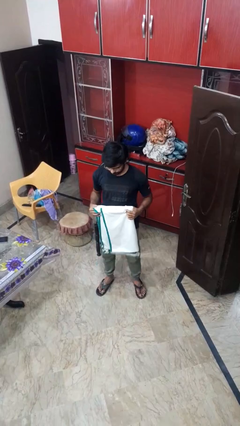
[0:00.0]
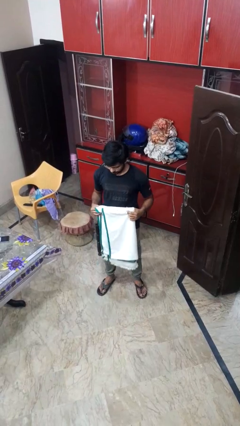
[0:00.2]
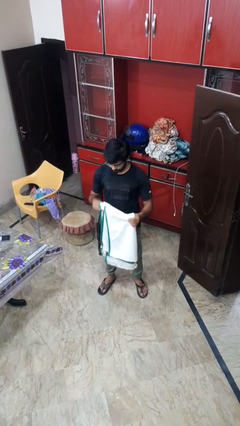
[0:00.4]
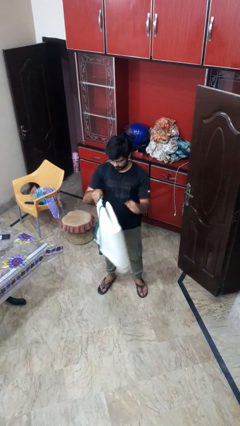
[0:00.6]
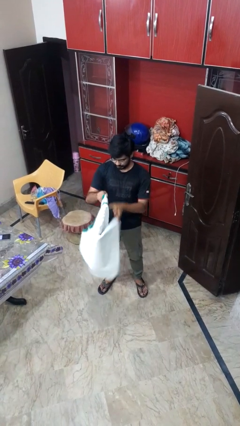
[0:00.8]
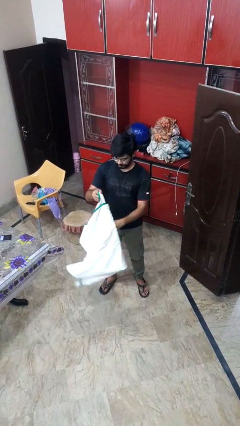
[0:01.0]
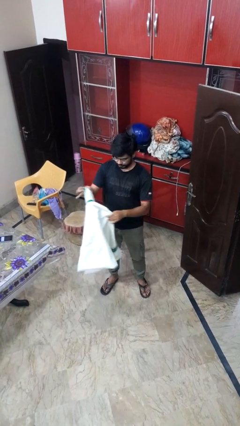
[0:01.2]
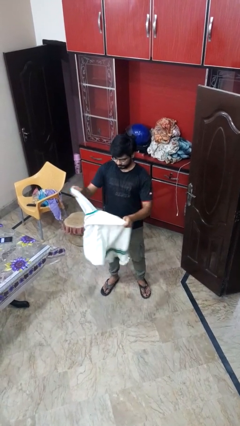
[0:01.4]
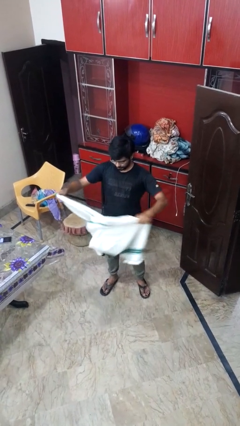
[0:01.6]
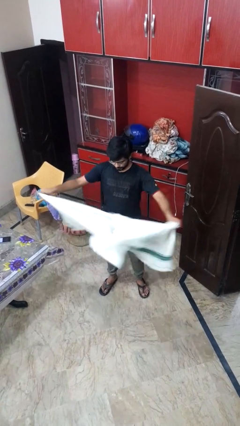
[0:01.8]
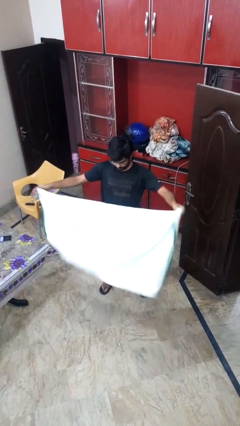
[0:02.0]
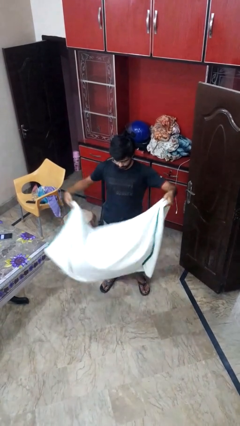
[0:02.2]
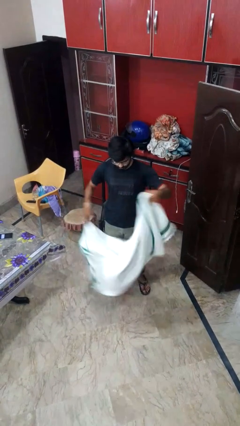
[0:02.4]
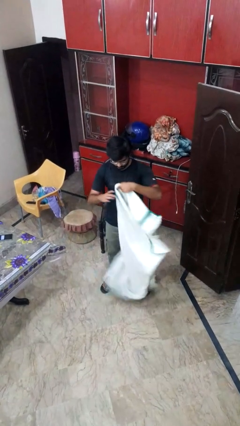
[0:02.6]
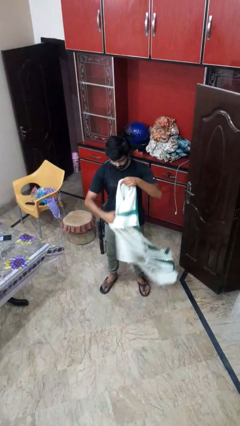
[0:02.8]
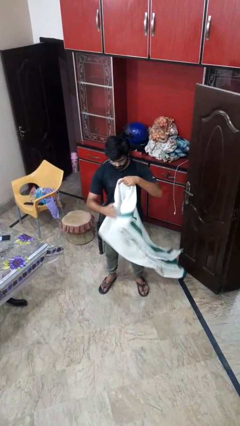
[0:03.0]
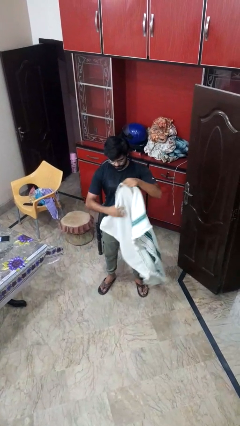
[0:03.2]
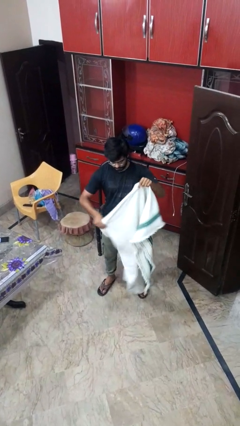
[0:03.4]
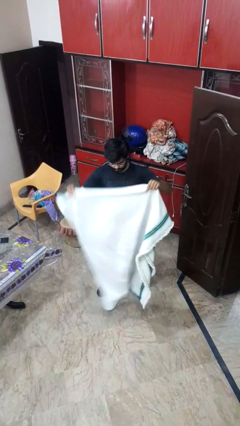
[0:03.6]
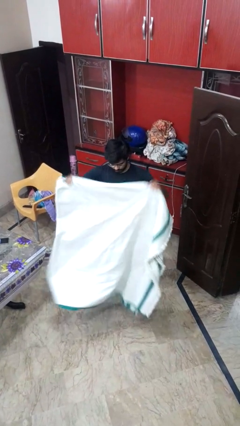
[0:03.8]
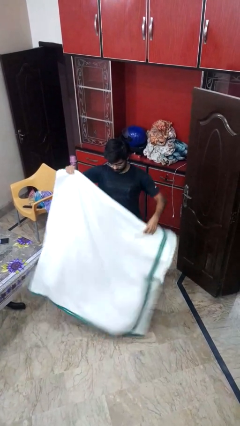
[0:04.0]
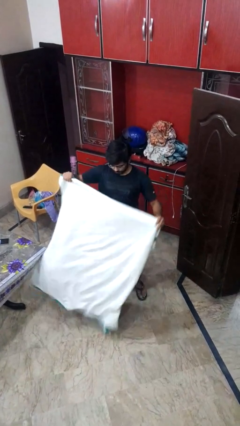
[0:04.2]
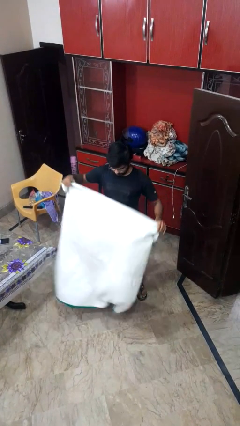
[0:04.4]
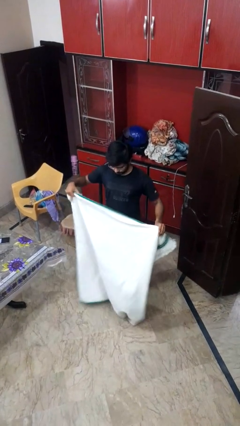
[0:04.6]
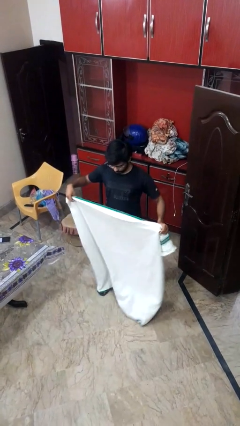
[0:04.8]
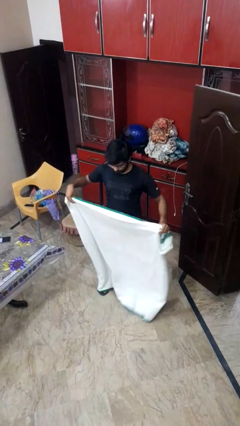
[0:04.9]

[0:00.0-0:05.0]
person unfolds blanket

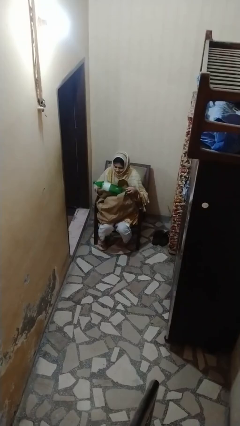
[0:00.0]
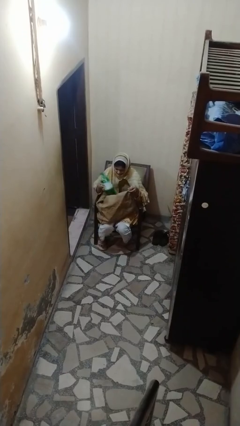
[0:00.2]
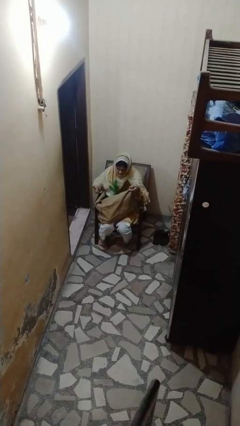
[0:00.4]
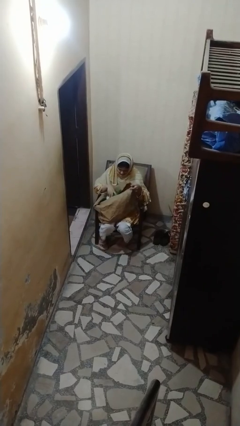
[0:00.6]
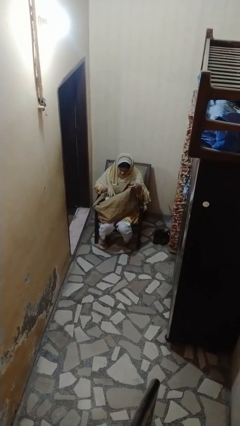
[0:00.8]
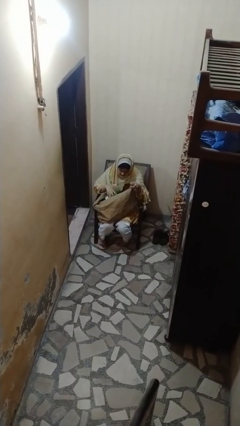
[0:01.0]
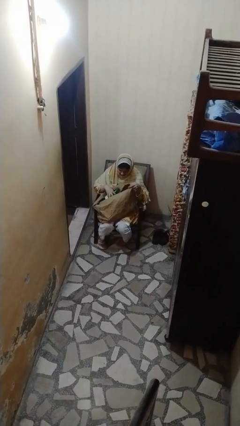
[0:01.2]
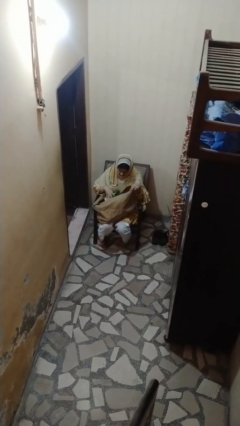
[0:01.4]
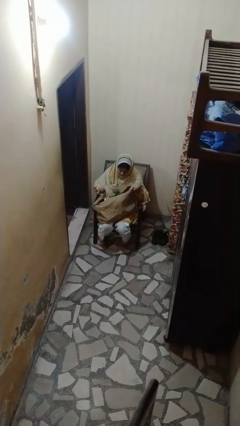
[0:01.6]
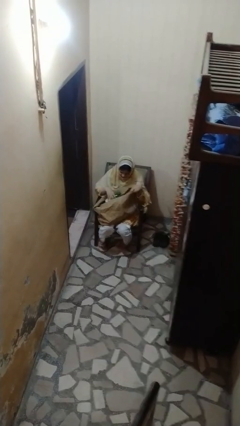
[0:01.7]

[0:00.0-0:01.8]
person puts object into bag

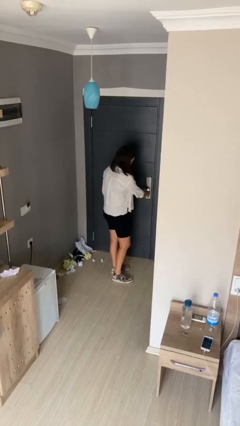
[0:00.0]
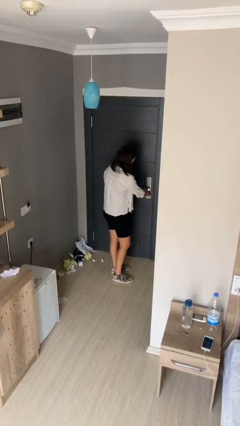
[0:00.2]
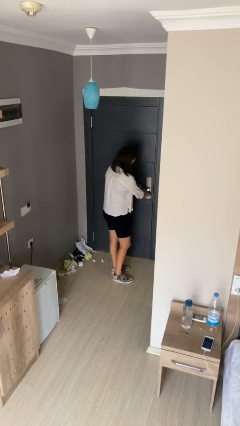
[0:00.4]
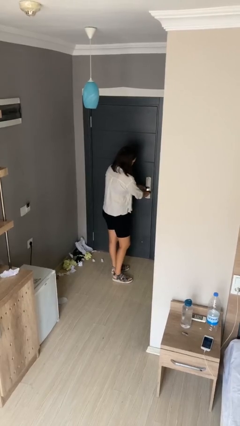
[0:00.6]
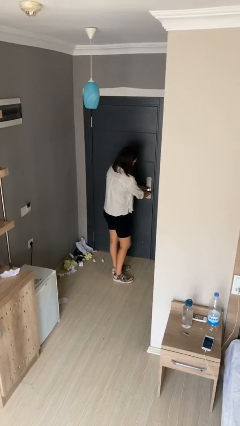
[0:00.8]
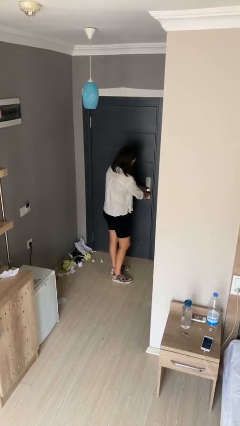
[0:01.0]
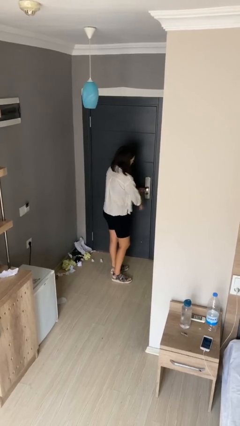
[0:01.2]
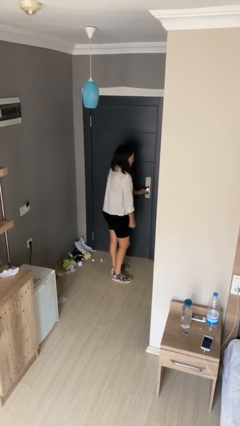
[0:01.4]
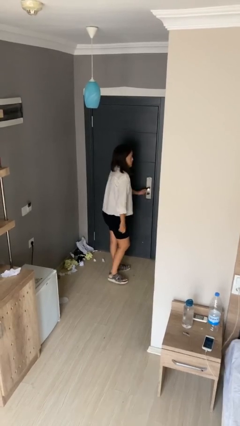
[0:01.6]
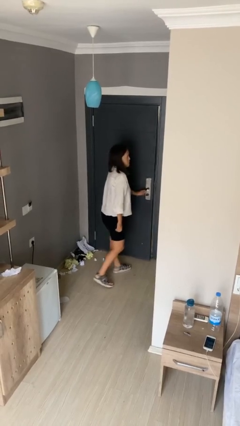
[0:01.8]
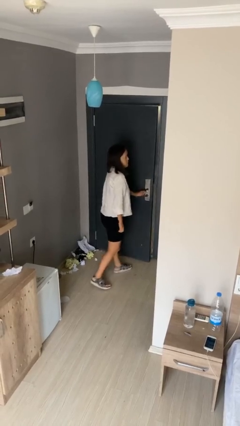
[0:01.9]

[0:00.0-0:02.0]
person unlocks door with keys

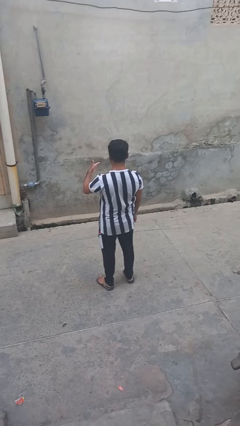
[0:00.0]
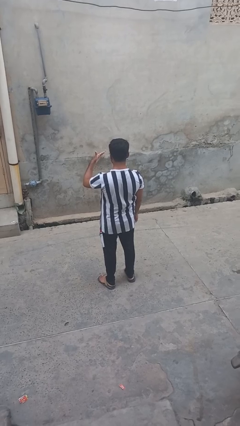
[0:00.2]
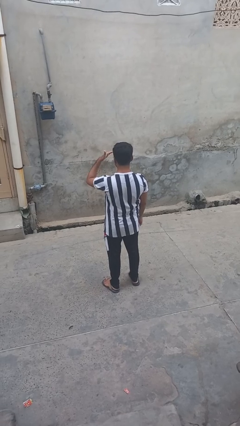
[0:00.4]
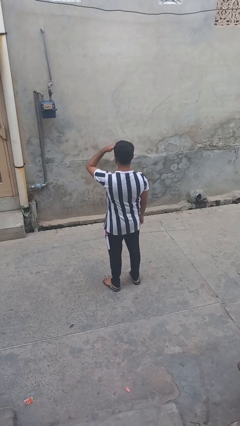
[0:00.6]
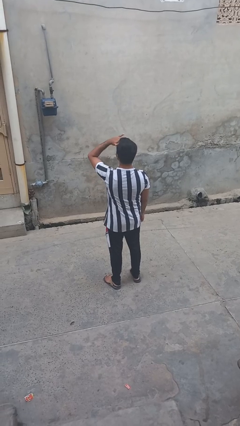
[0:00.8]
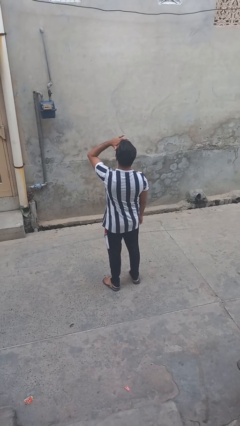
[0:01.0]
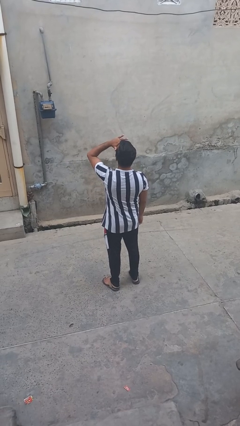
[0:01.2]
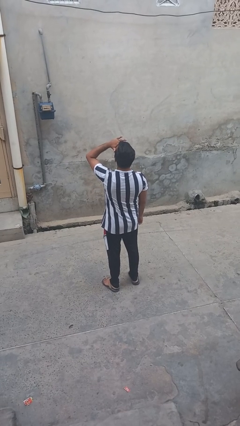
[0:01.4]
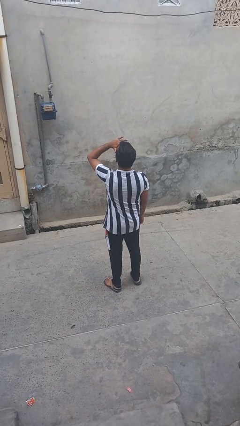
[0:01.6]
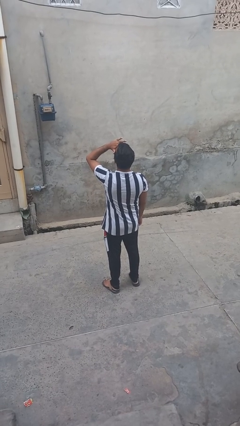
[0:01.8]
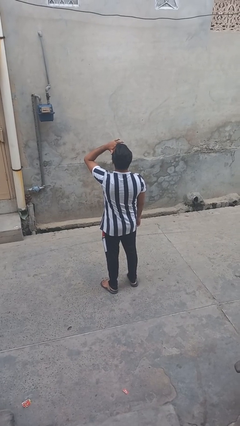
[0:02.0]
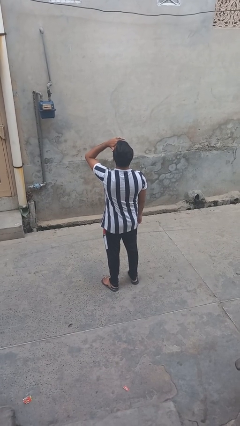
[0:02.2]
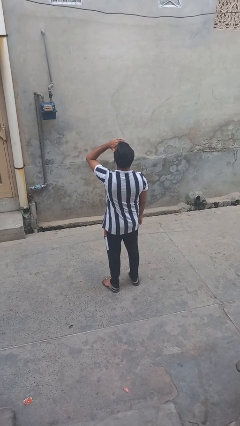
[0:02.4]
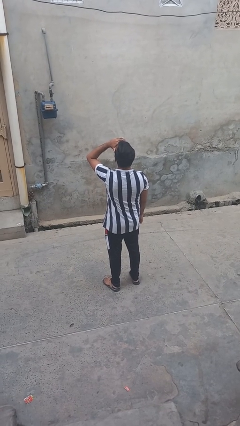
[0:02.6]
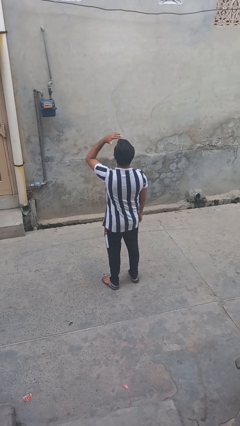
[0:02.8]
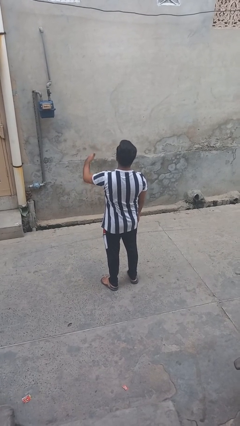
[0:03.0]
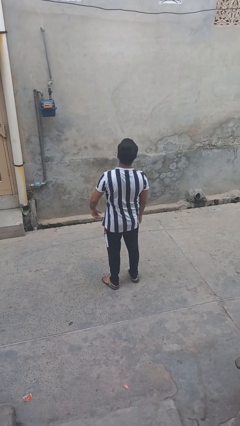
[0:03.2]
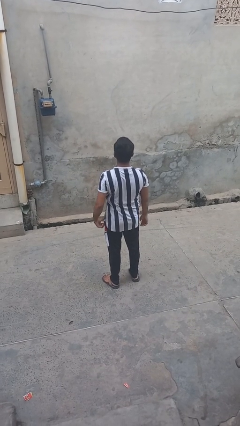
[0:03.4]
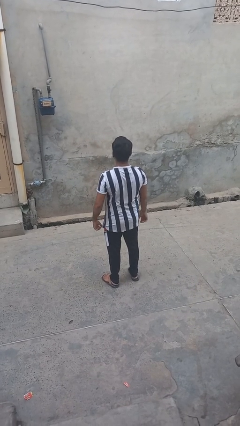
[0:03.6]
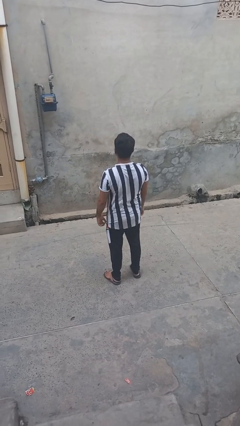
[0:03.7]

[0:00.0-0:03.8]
person shades eyes

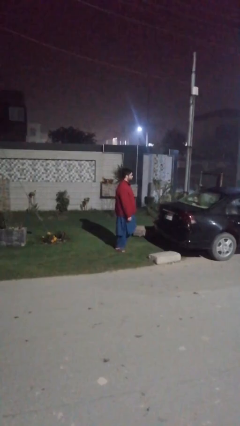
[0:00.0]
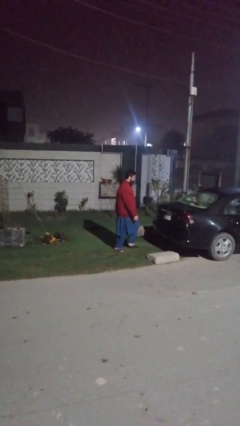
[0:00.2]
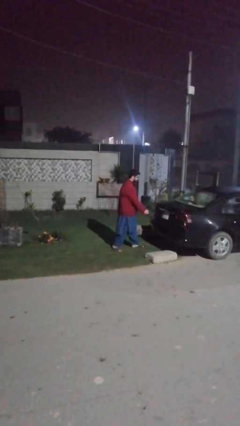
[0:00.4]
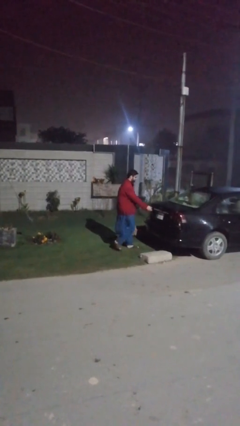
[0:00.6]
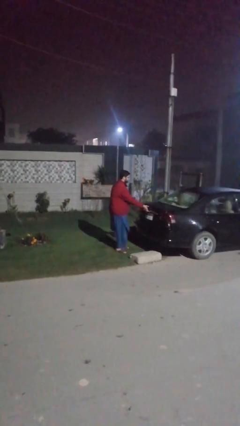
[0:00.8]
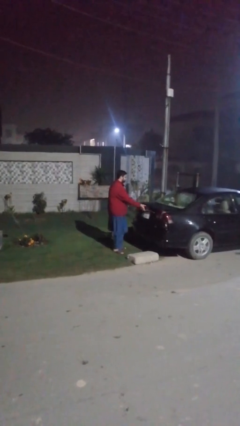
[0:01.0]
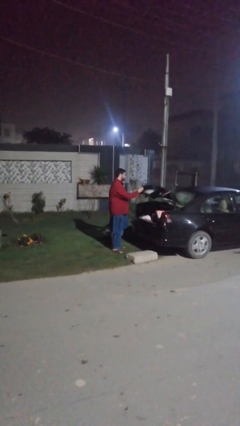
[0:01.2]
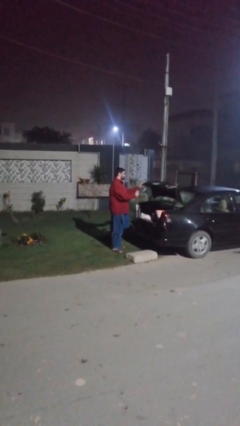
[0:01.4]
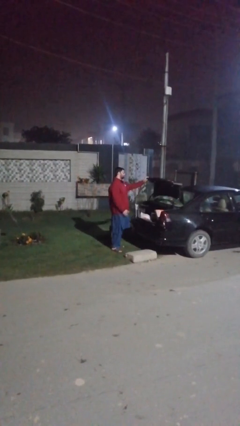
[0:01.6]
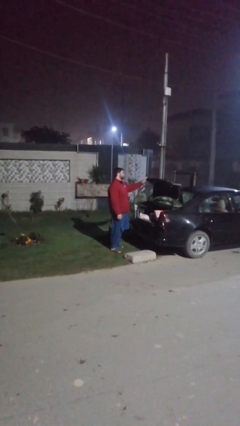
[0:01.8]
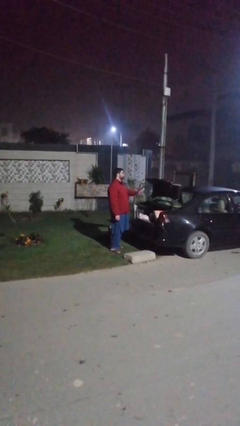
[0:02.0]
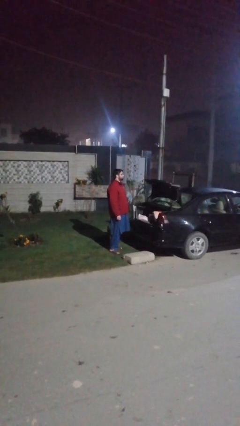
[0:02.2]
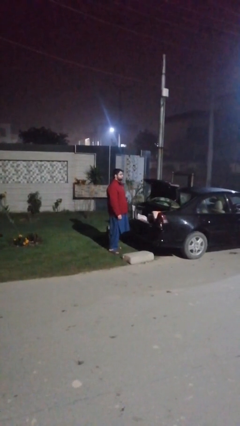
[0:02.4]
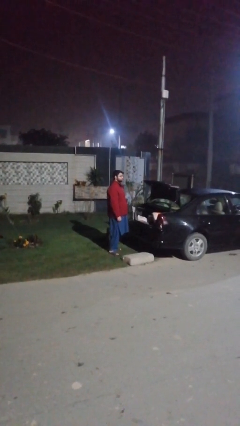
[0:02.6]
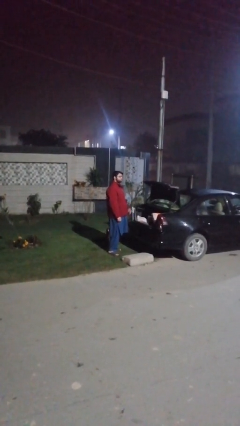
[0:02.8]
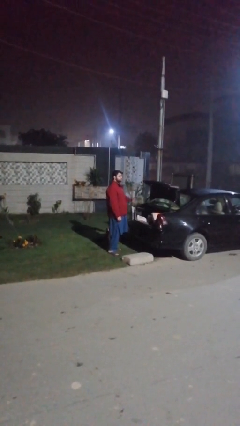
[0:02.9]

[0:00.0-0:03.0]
person opens car trunk

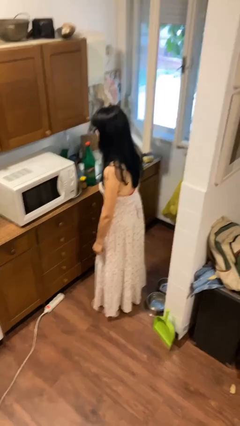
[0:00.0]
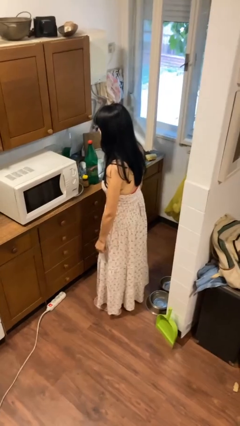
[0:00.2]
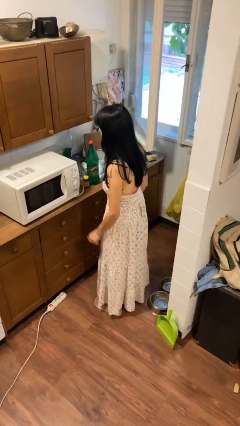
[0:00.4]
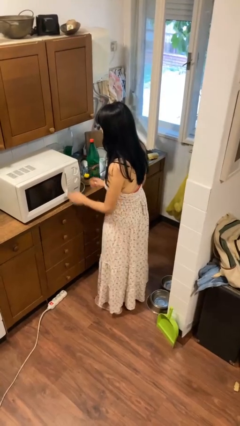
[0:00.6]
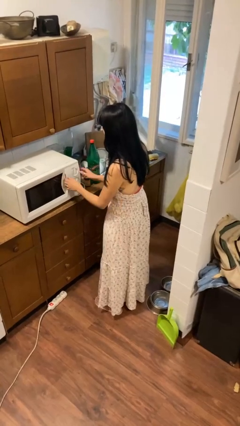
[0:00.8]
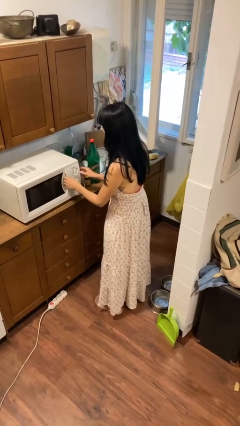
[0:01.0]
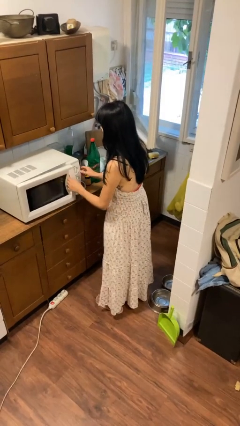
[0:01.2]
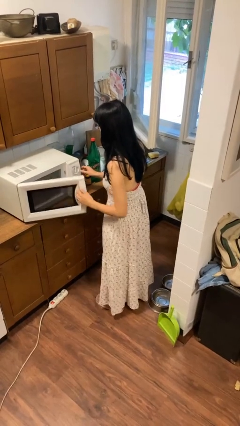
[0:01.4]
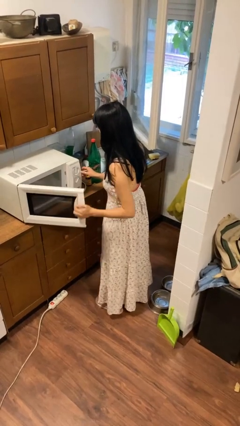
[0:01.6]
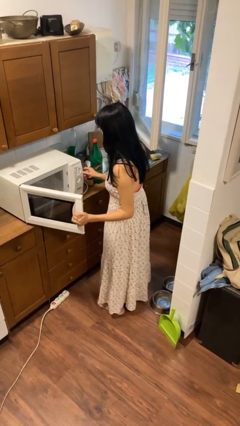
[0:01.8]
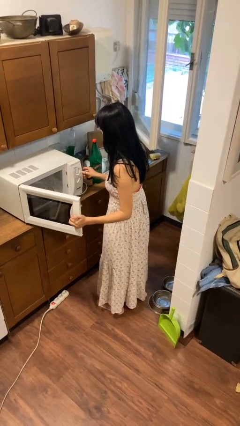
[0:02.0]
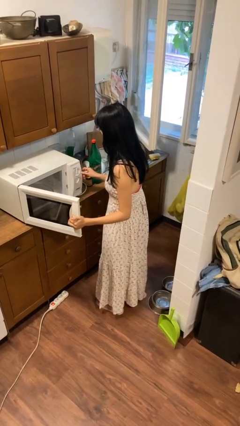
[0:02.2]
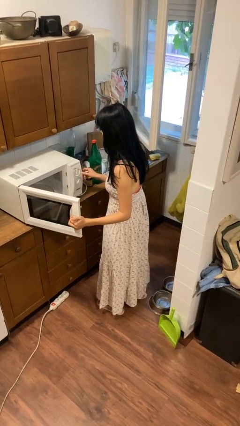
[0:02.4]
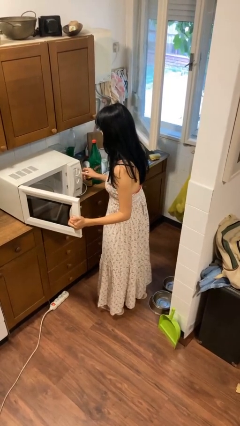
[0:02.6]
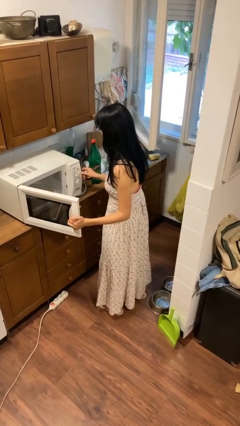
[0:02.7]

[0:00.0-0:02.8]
person opens microwave
